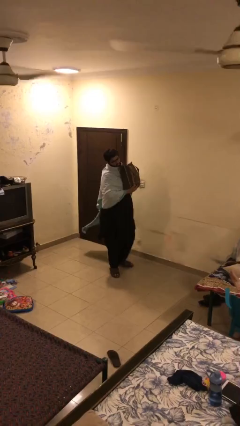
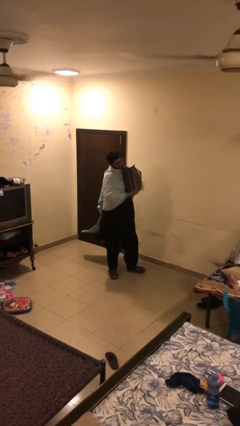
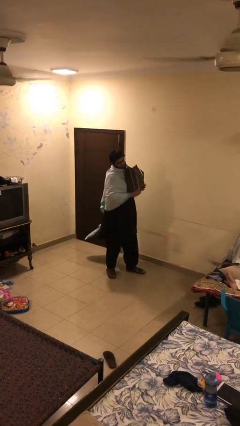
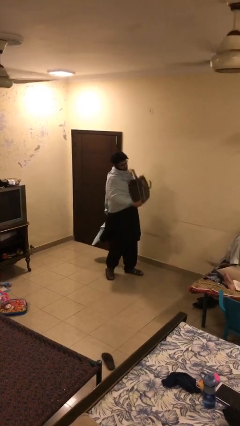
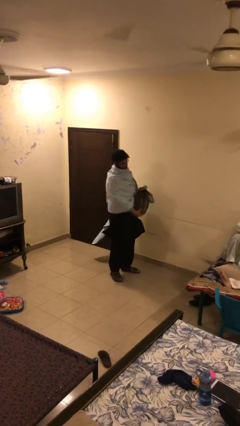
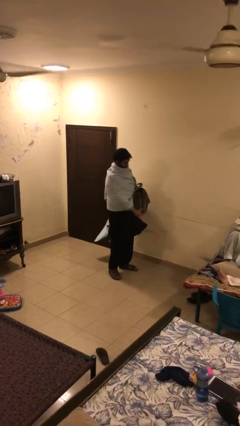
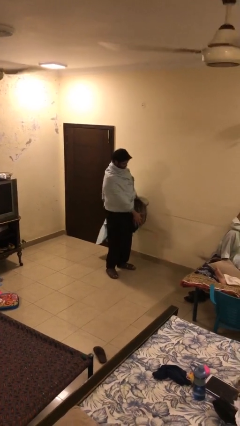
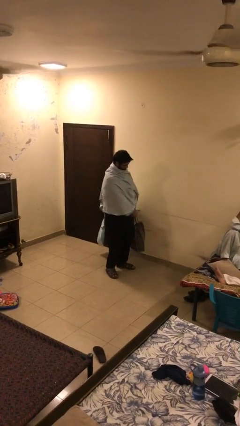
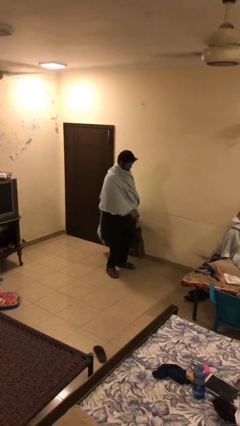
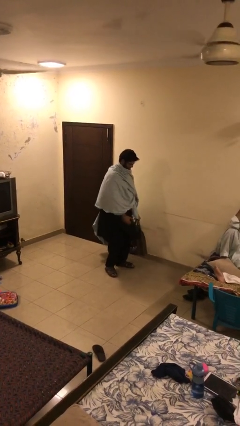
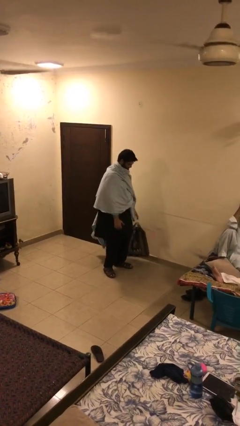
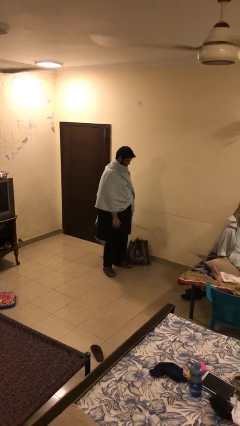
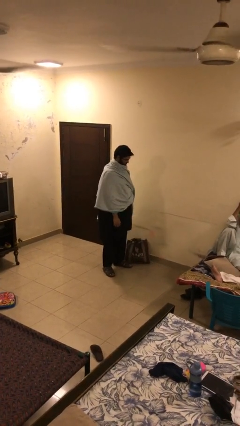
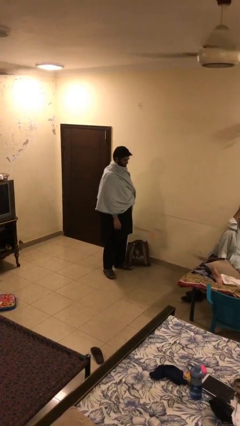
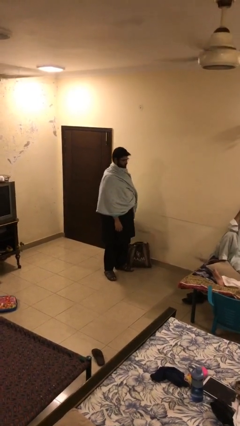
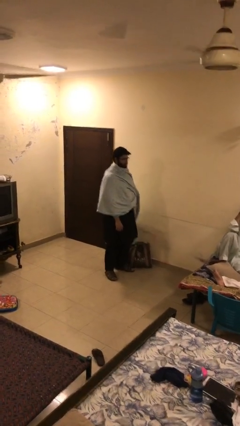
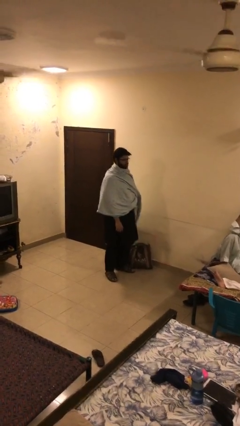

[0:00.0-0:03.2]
person puts down object on floor

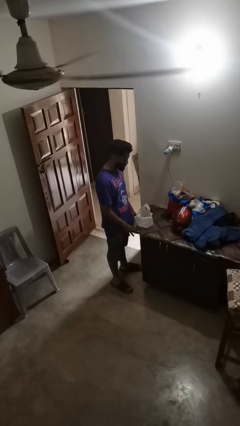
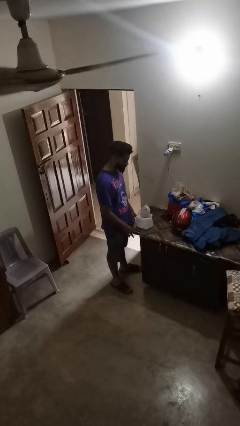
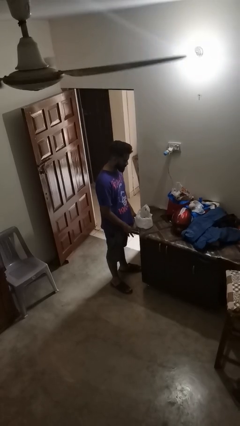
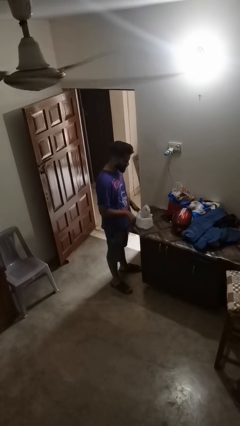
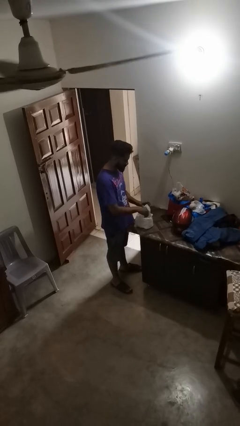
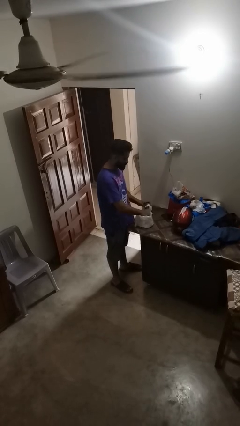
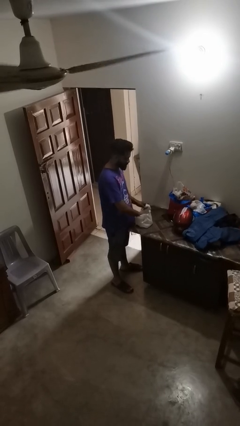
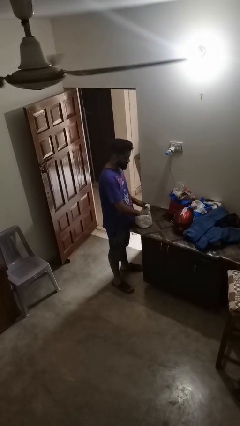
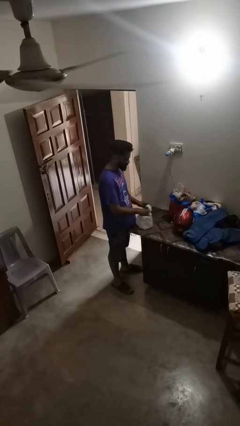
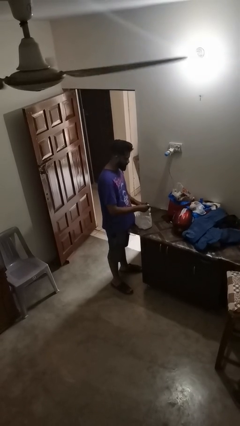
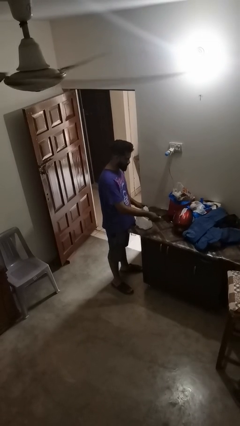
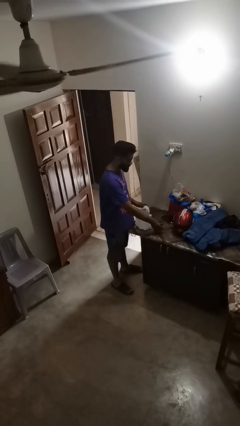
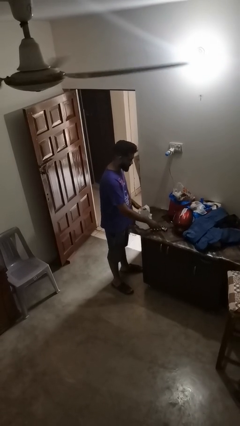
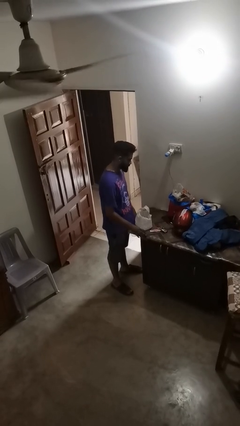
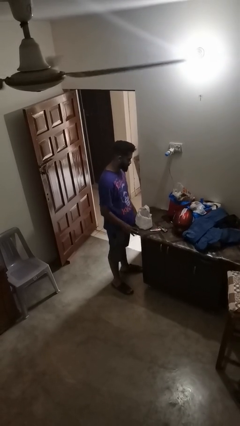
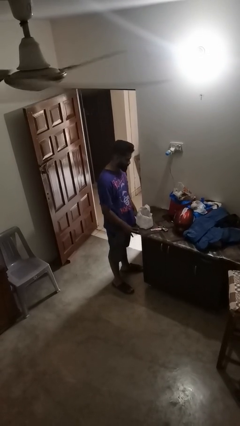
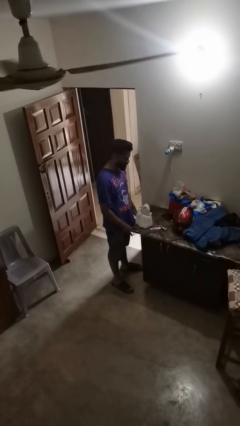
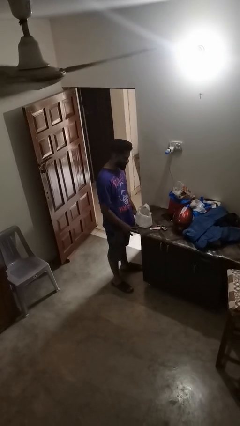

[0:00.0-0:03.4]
person takes object from bag

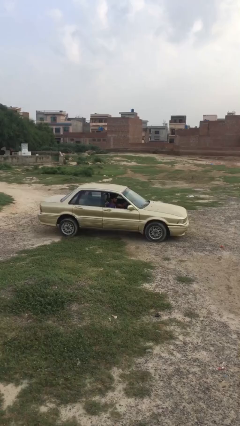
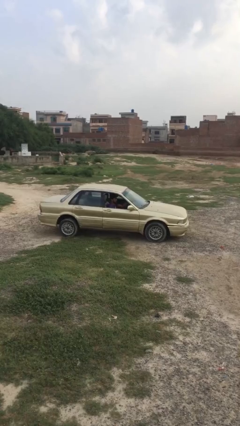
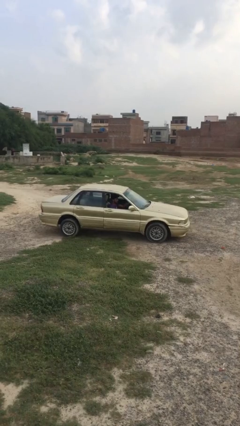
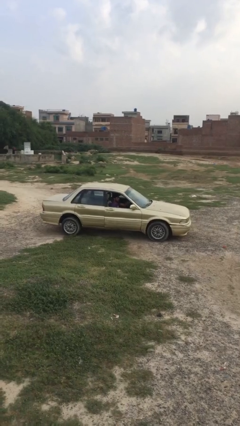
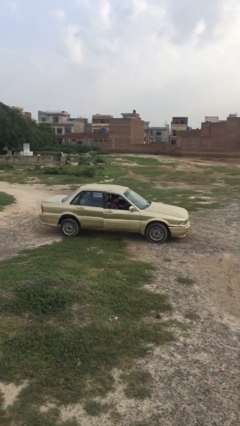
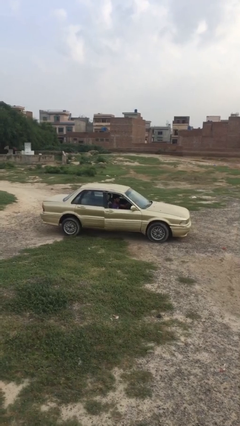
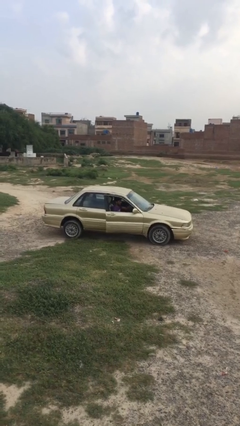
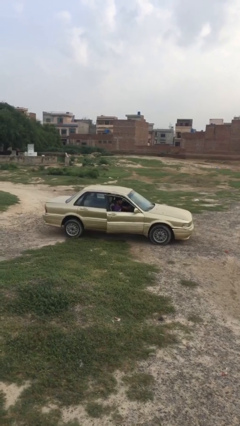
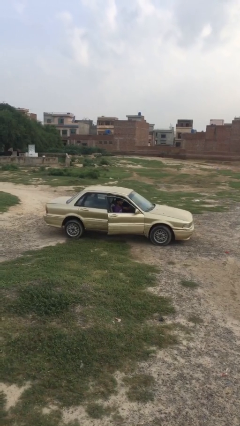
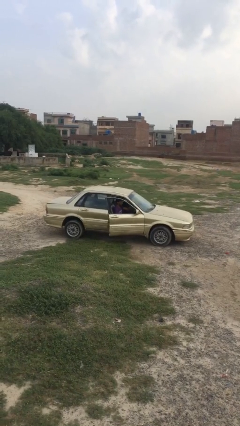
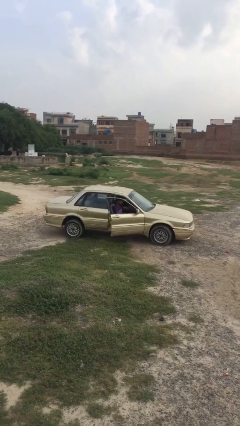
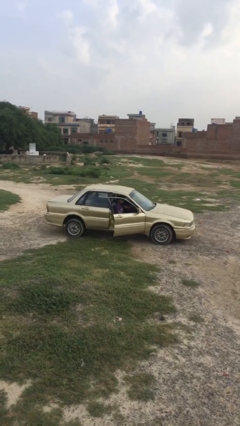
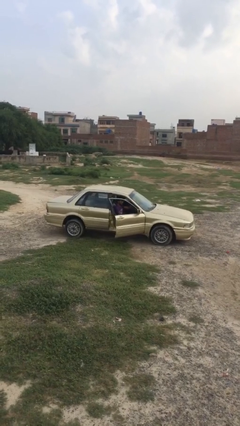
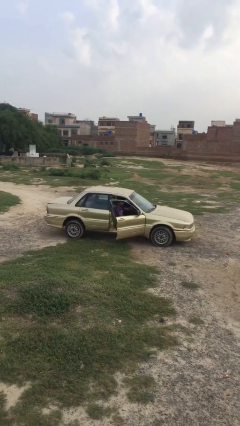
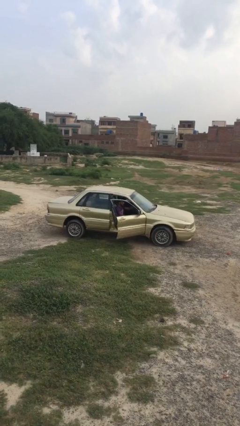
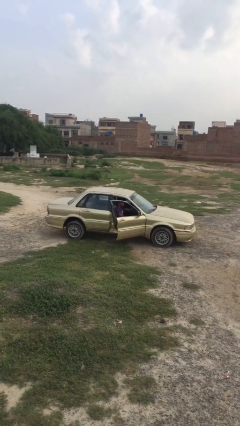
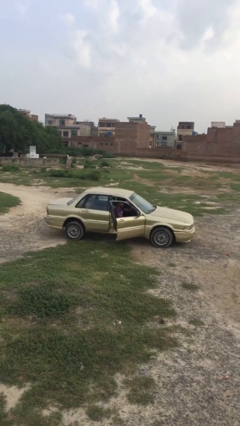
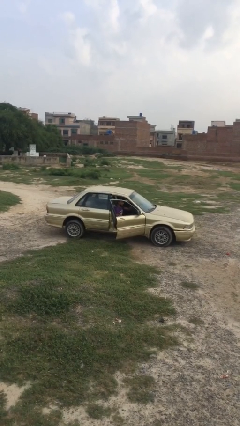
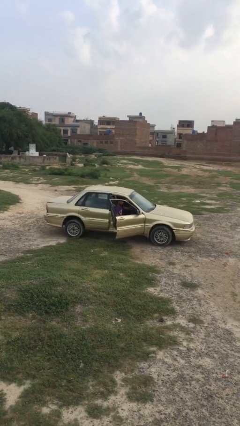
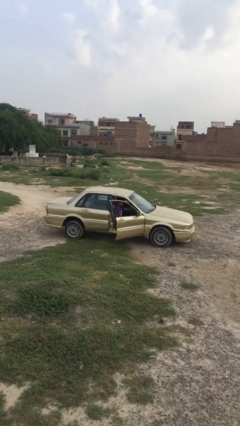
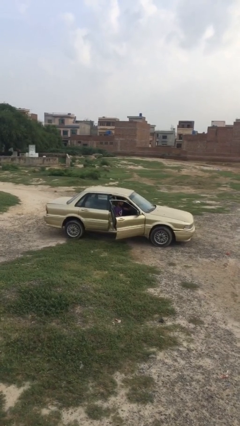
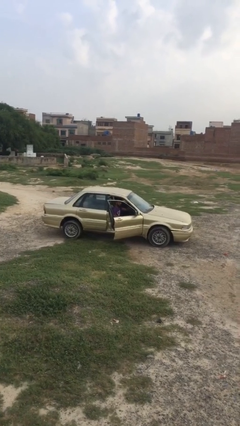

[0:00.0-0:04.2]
person opens car door

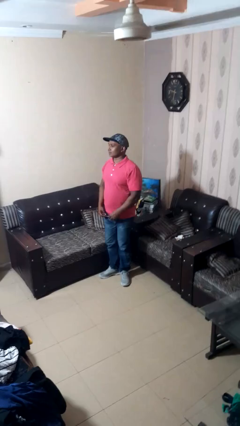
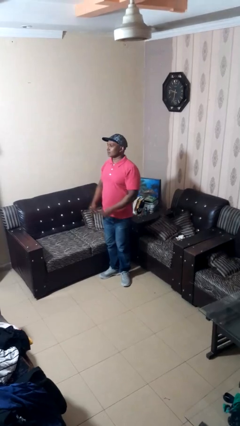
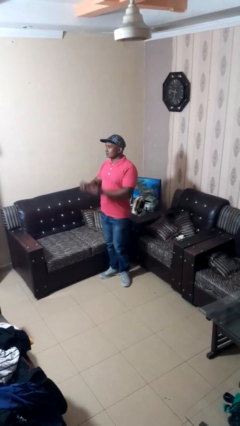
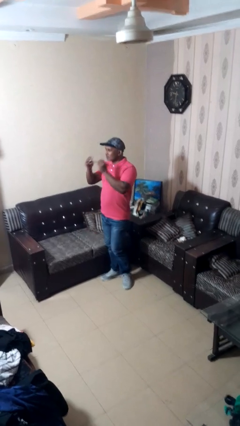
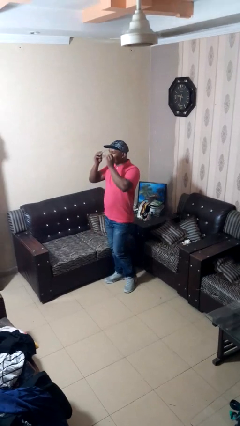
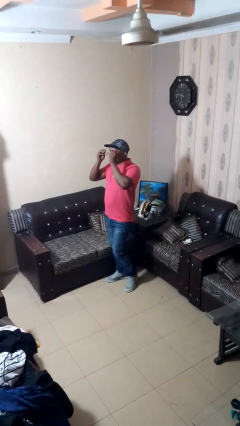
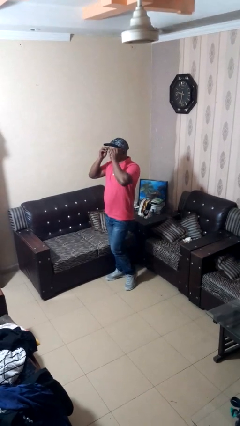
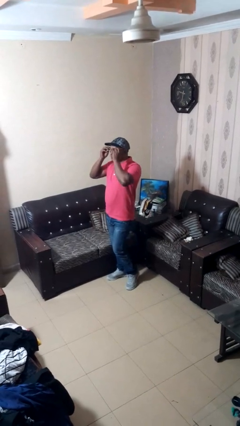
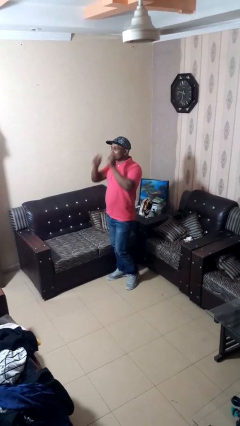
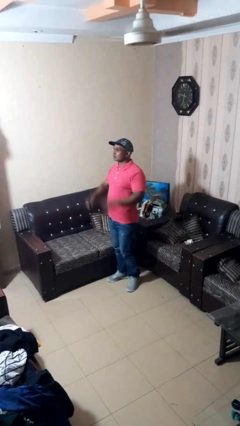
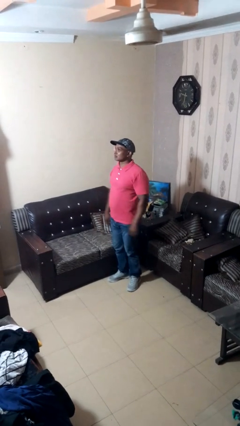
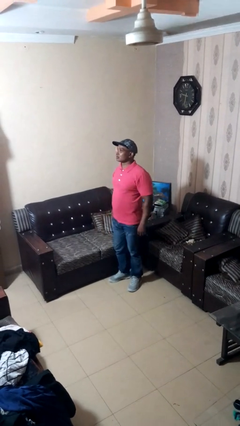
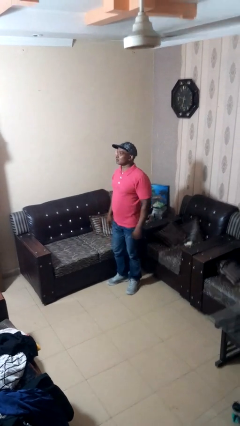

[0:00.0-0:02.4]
person puts on glasses

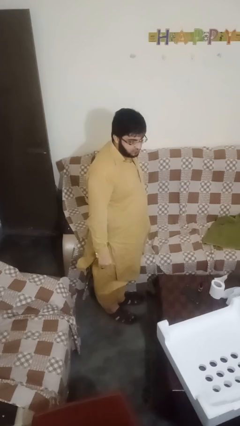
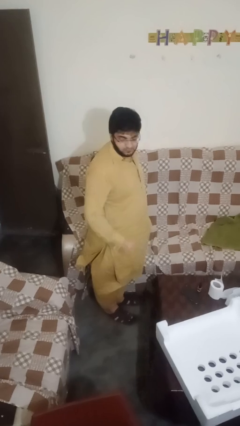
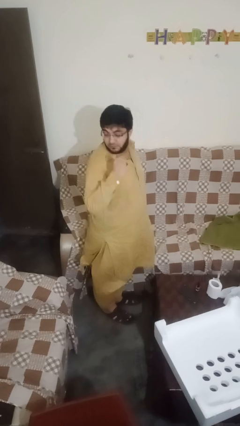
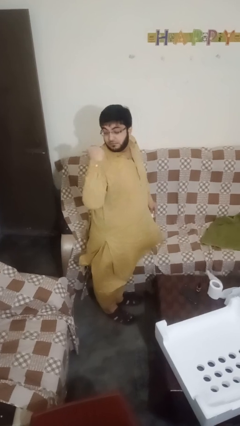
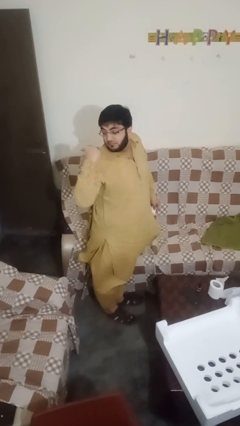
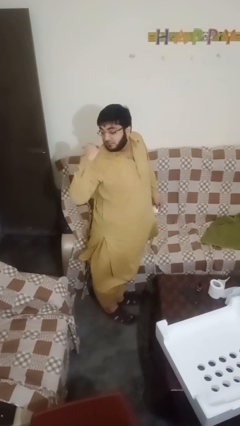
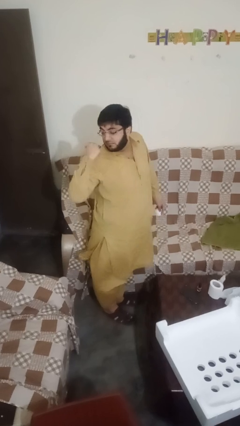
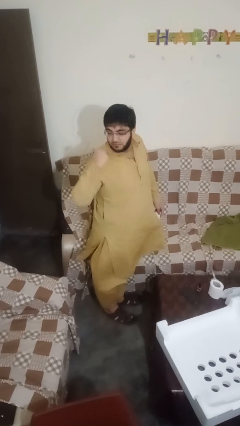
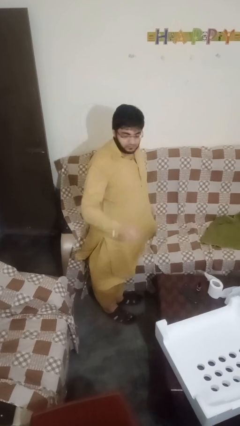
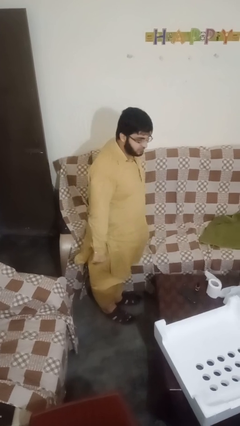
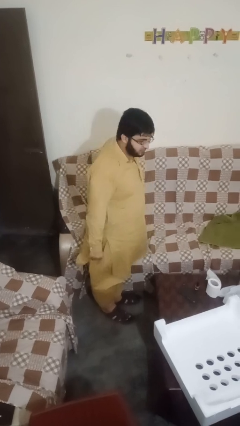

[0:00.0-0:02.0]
person gestures behind me

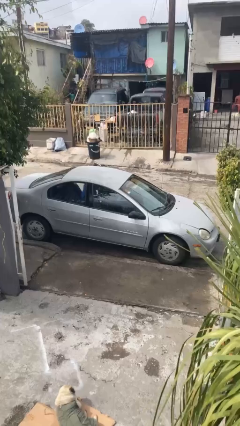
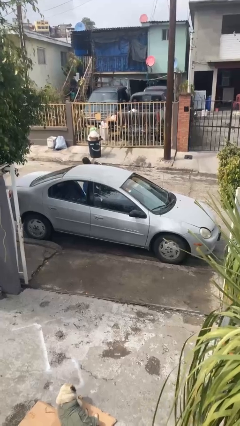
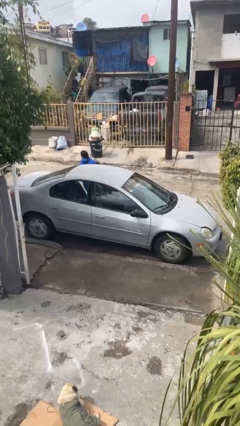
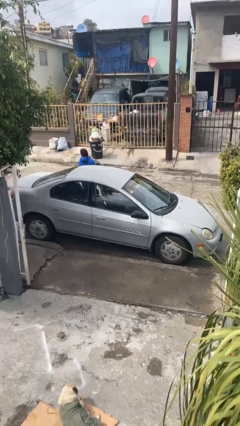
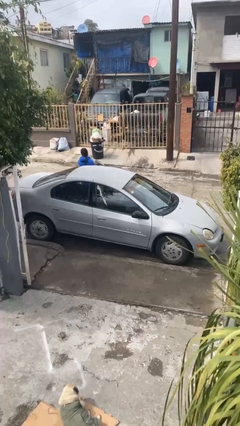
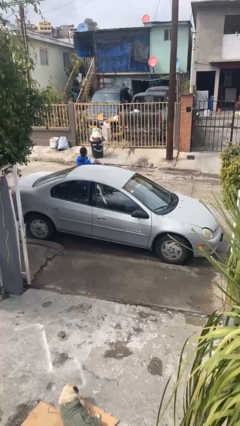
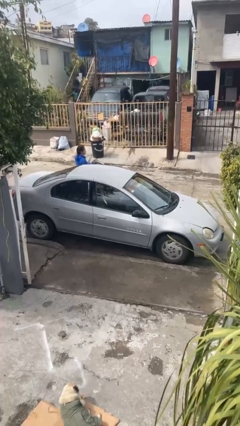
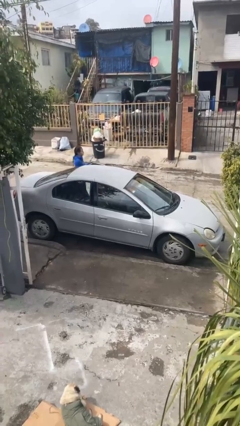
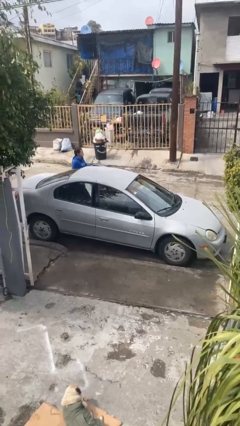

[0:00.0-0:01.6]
car drops off person

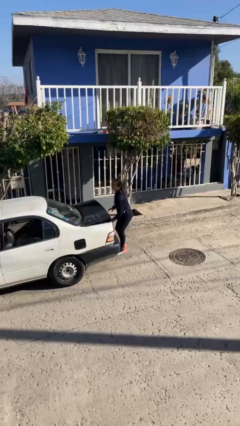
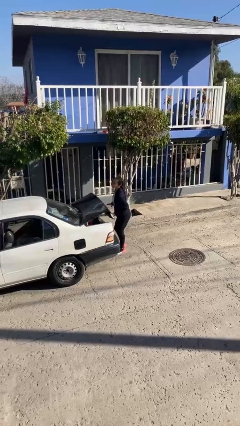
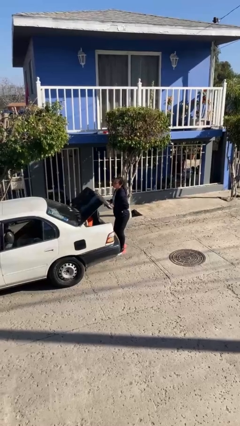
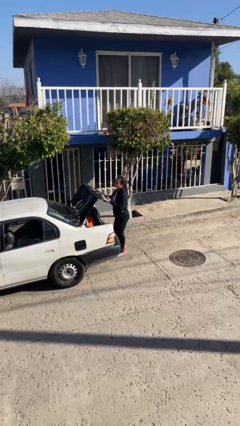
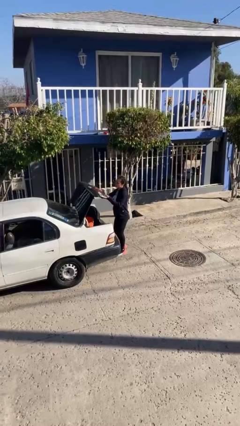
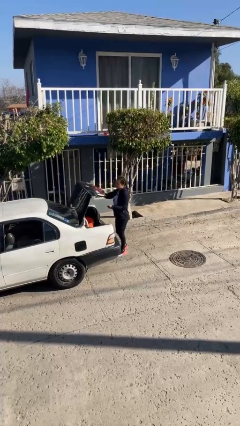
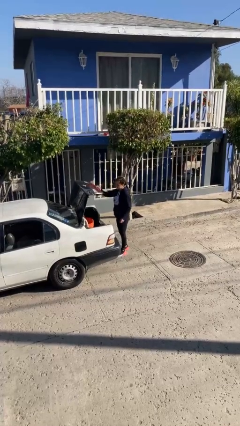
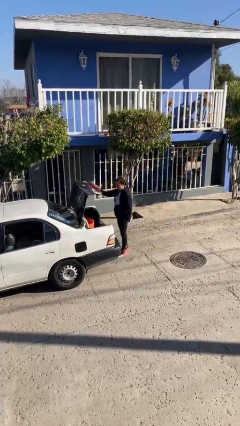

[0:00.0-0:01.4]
person opens car trunk
